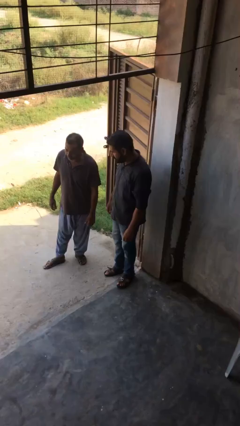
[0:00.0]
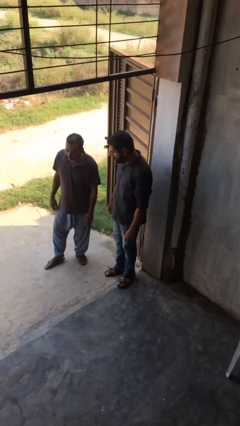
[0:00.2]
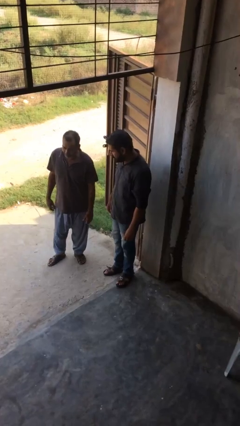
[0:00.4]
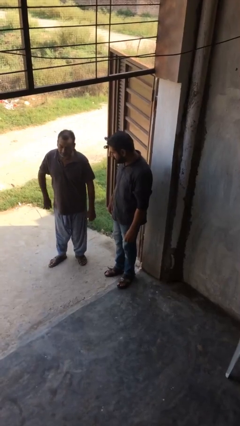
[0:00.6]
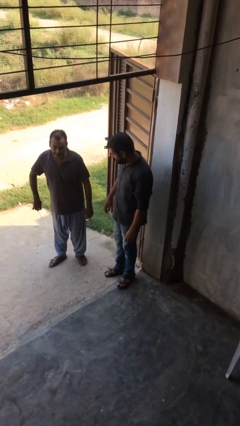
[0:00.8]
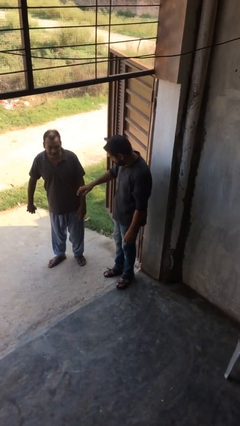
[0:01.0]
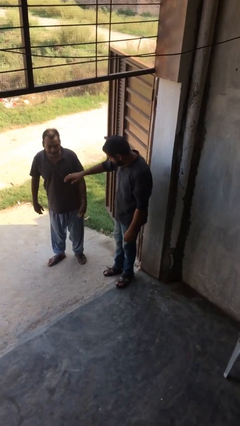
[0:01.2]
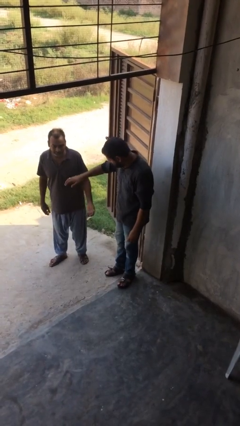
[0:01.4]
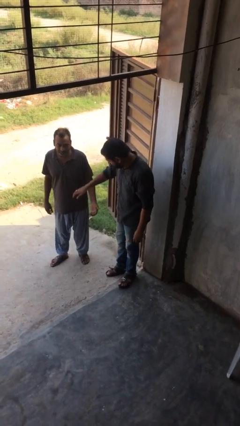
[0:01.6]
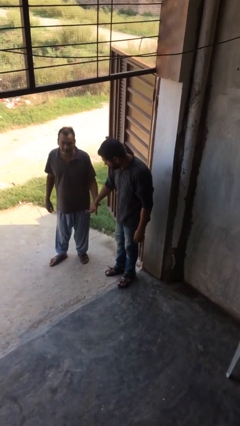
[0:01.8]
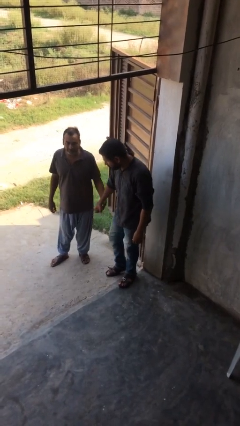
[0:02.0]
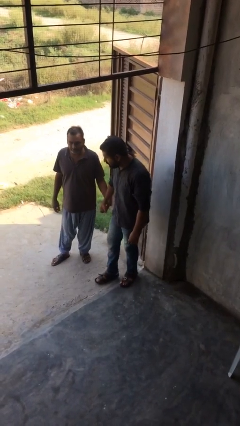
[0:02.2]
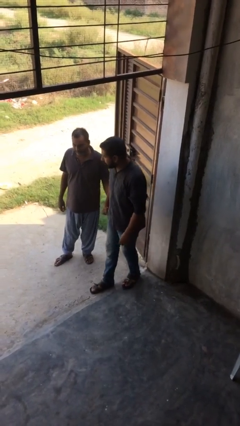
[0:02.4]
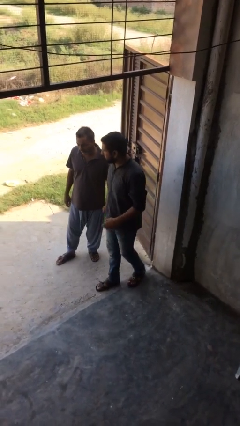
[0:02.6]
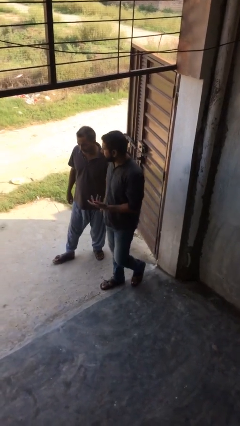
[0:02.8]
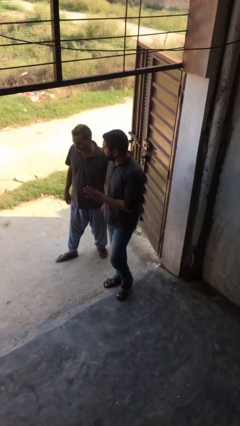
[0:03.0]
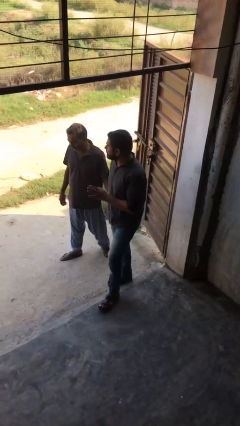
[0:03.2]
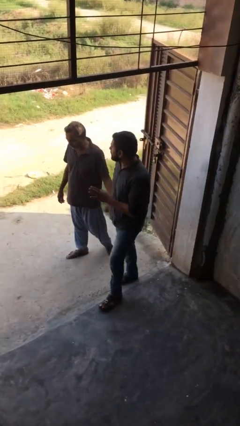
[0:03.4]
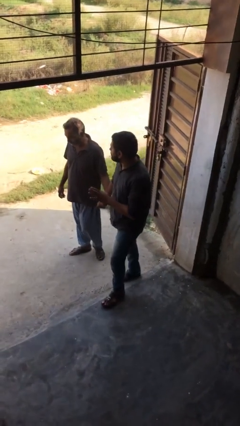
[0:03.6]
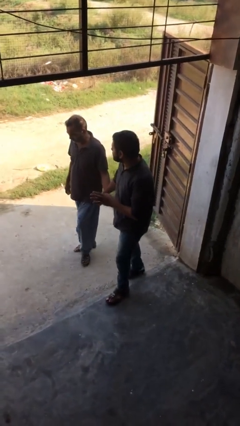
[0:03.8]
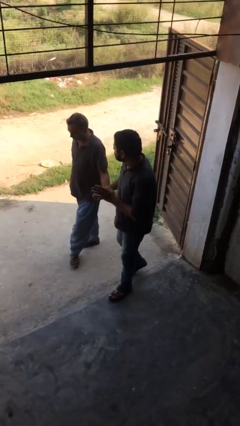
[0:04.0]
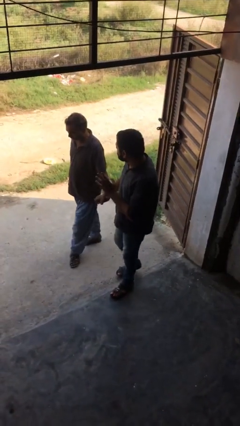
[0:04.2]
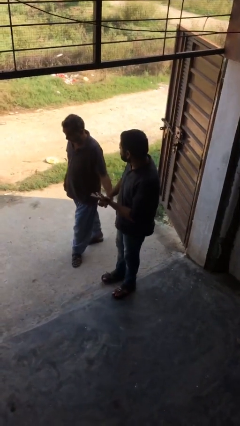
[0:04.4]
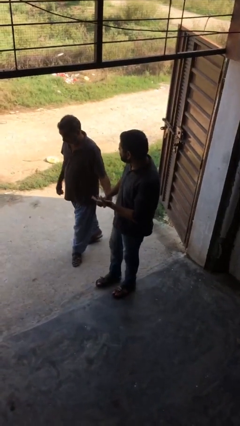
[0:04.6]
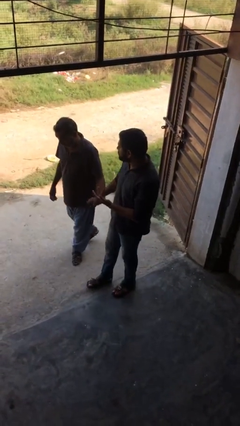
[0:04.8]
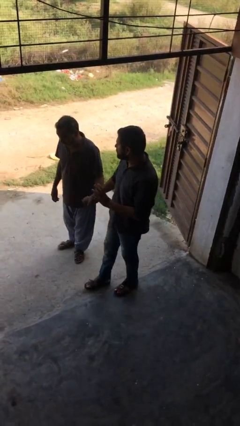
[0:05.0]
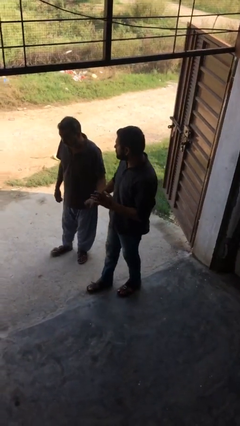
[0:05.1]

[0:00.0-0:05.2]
person holds hand

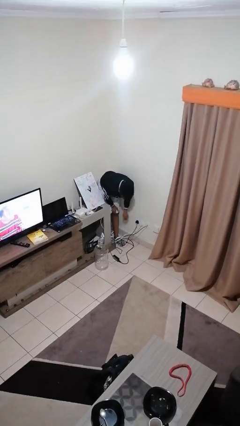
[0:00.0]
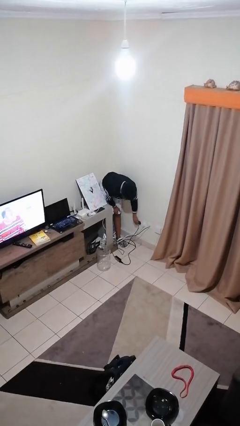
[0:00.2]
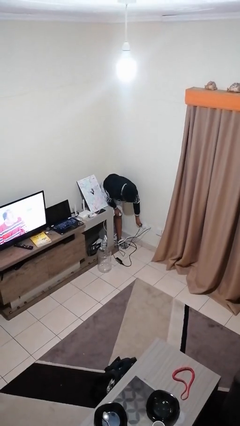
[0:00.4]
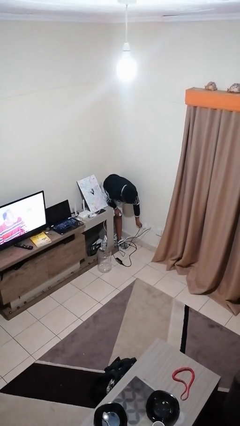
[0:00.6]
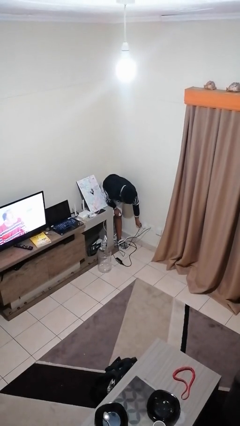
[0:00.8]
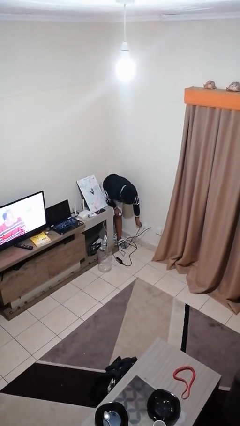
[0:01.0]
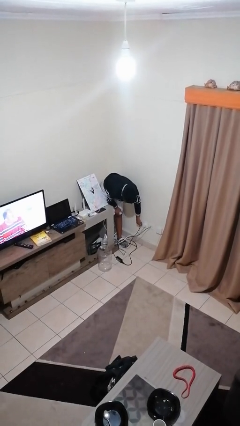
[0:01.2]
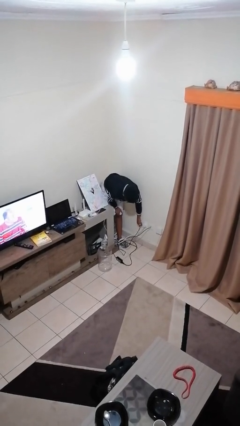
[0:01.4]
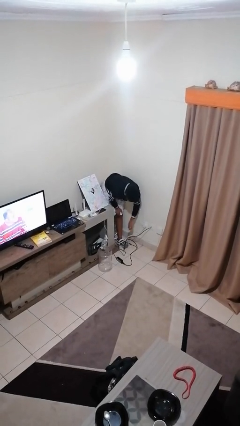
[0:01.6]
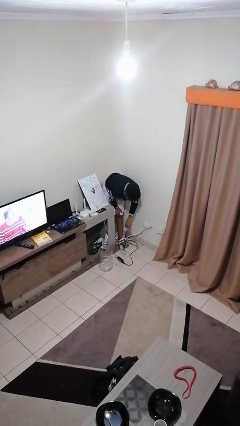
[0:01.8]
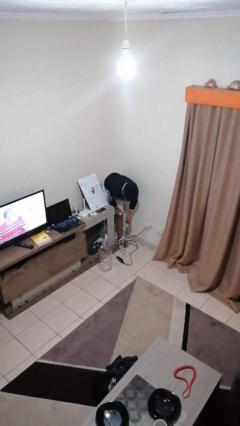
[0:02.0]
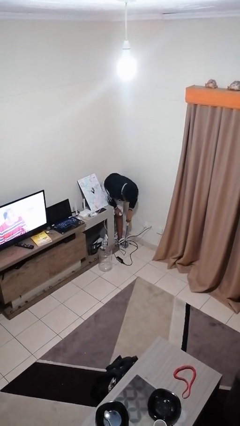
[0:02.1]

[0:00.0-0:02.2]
person unplugs from electrical socket

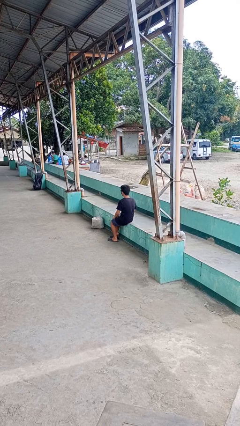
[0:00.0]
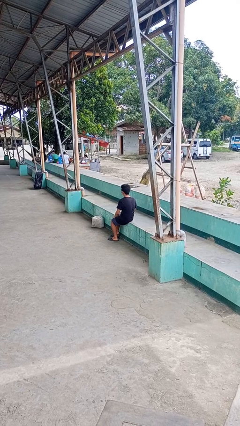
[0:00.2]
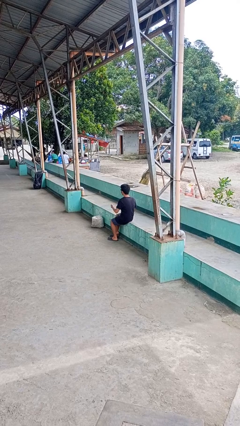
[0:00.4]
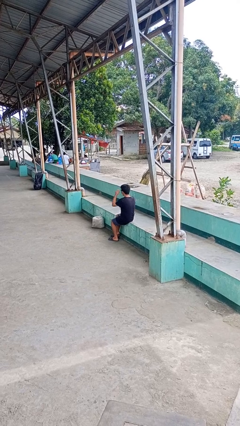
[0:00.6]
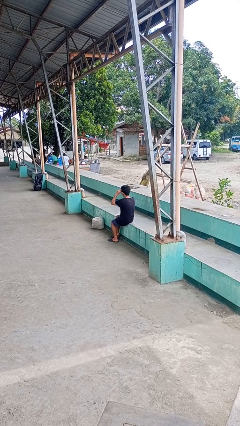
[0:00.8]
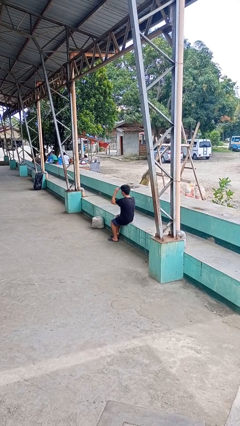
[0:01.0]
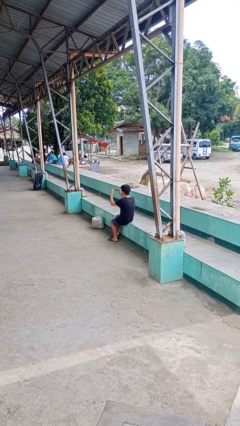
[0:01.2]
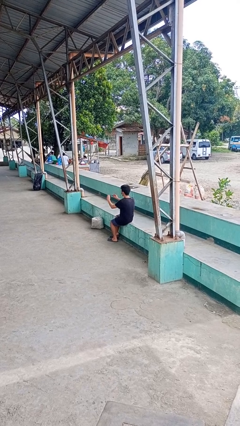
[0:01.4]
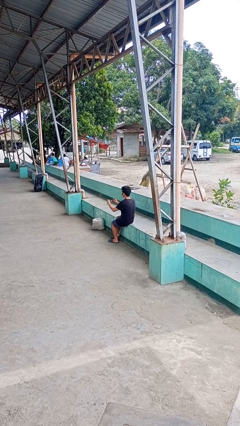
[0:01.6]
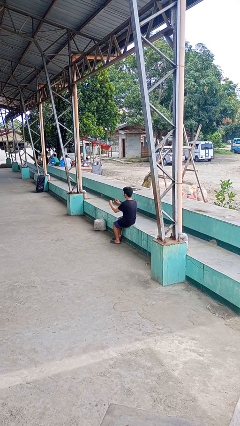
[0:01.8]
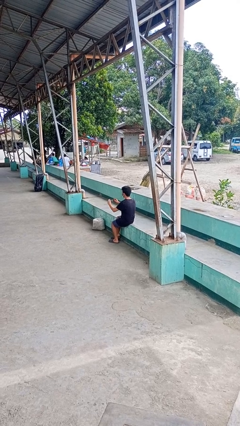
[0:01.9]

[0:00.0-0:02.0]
person takes off sunglasses

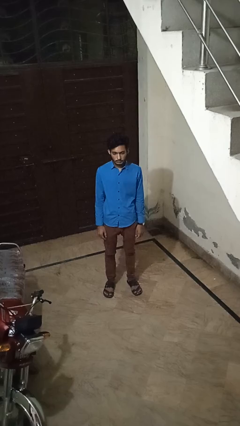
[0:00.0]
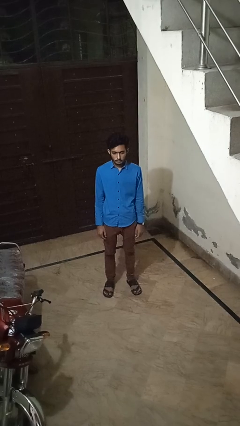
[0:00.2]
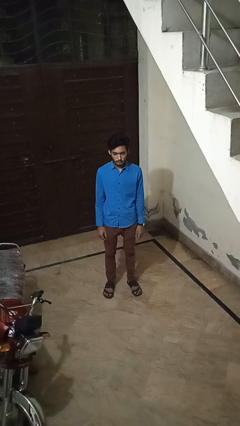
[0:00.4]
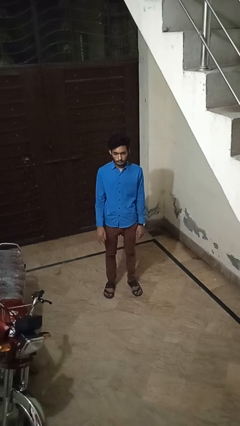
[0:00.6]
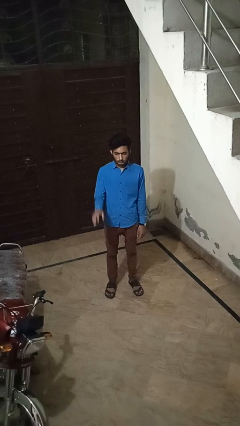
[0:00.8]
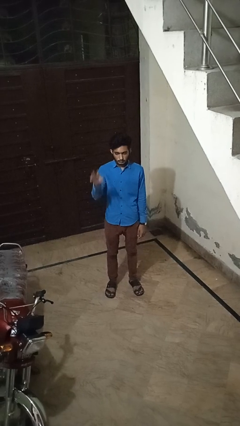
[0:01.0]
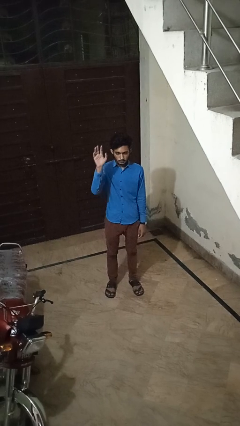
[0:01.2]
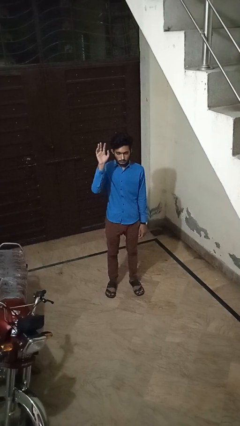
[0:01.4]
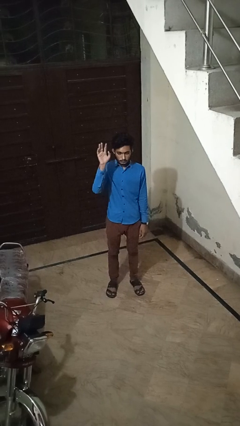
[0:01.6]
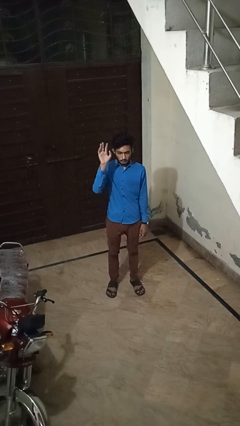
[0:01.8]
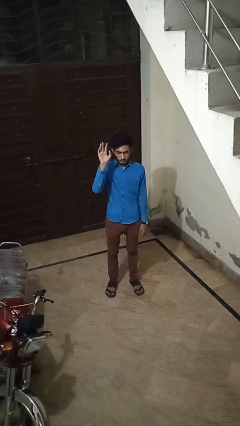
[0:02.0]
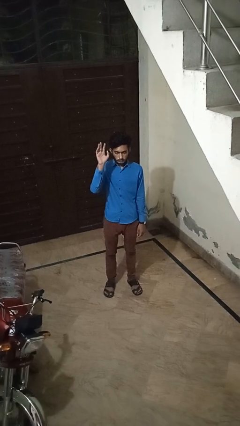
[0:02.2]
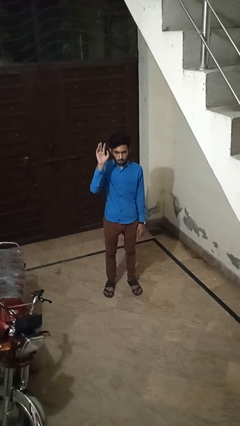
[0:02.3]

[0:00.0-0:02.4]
person gestures raise hand

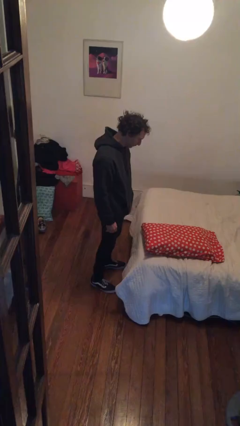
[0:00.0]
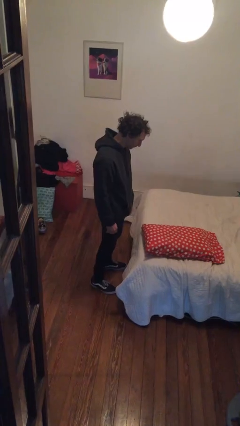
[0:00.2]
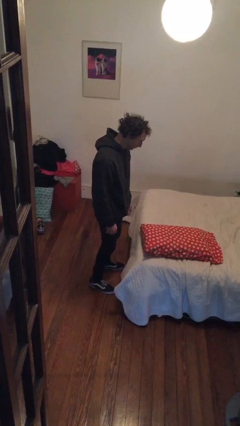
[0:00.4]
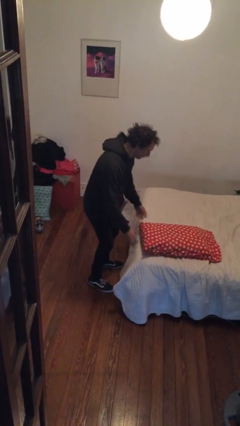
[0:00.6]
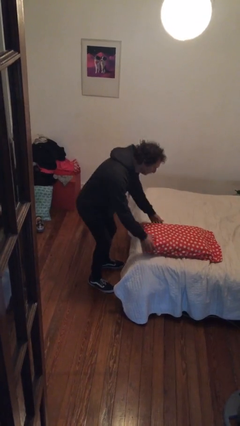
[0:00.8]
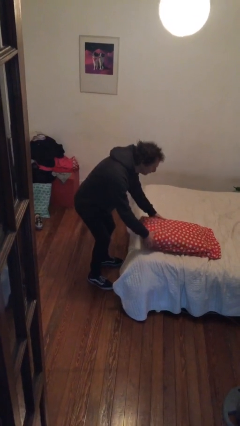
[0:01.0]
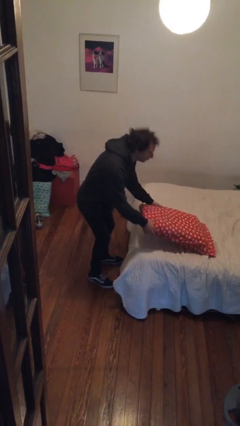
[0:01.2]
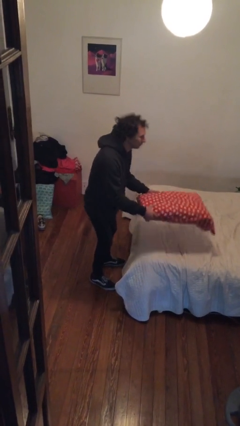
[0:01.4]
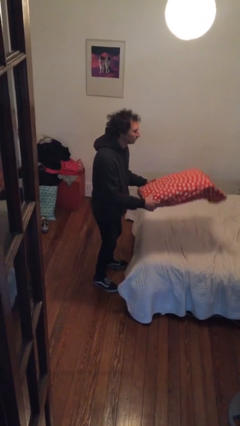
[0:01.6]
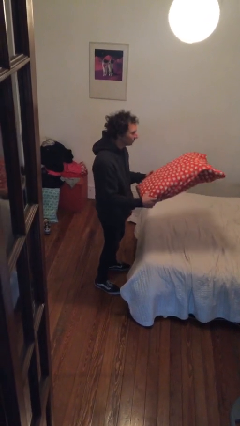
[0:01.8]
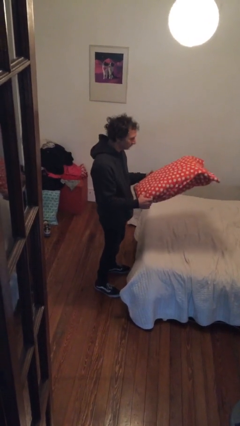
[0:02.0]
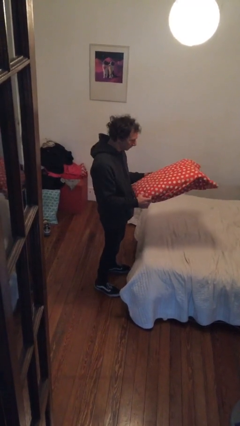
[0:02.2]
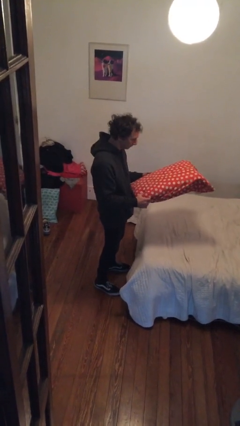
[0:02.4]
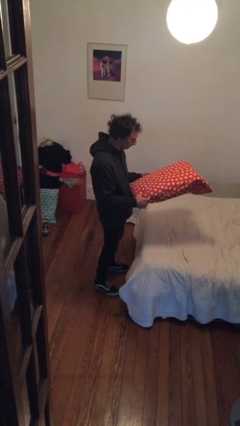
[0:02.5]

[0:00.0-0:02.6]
person picks up object from bed

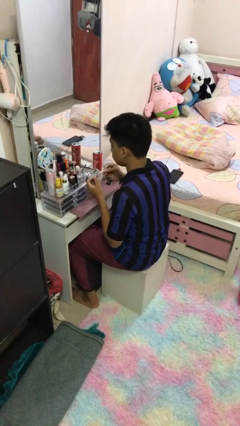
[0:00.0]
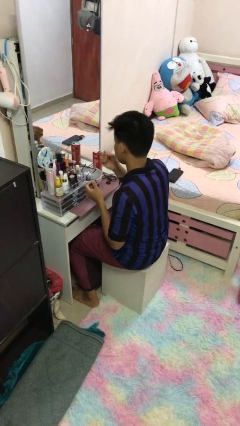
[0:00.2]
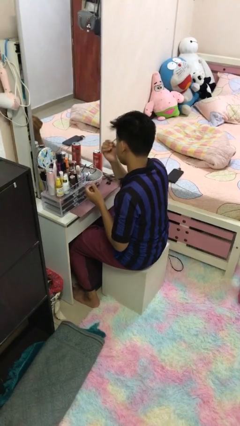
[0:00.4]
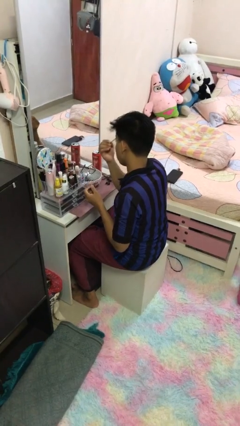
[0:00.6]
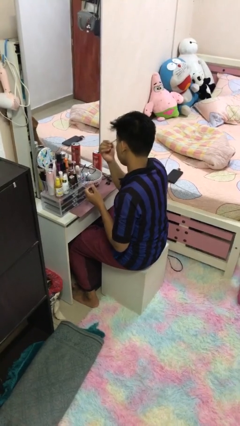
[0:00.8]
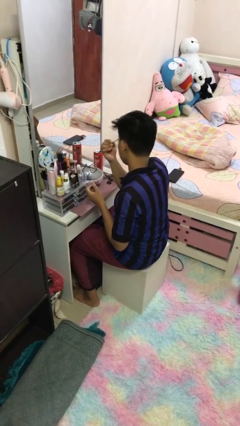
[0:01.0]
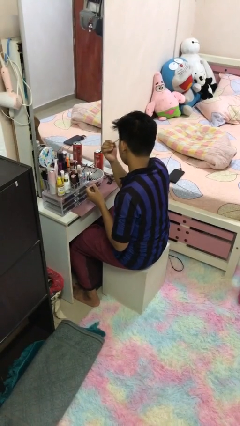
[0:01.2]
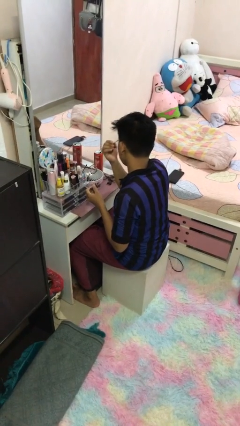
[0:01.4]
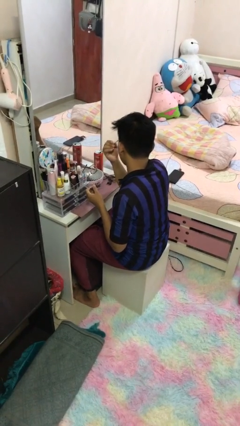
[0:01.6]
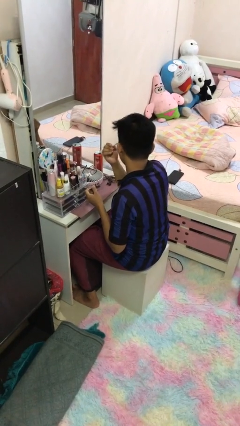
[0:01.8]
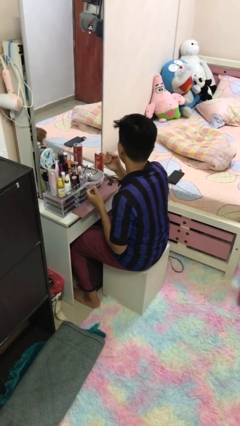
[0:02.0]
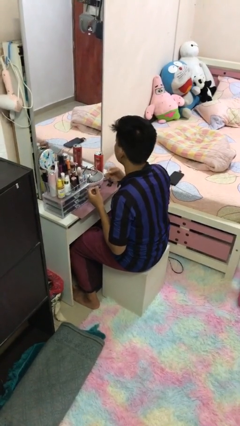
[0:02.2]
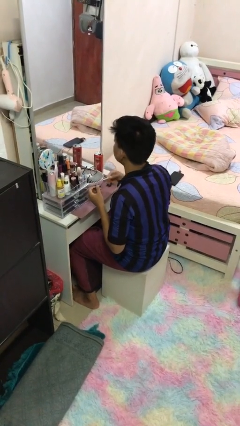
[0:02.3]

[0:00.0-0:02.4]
person applies eye makeup

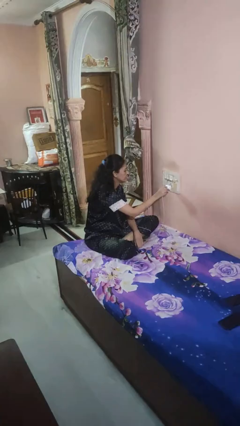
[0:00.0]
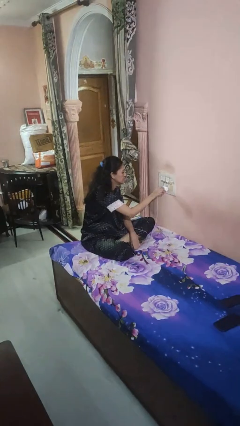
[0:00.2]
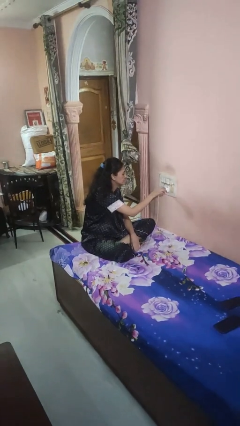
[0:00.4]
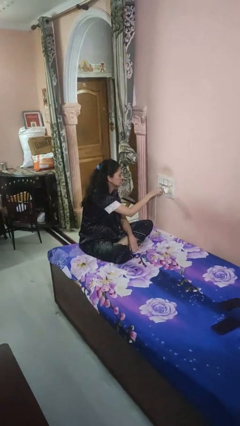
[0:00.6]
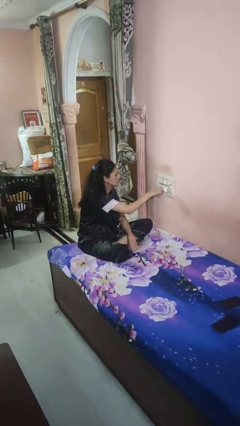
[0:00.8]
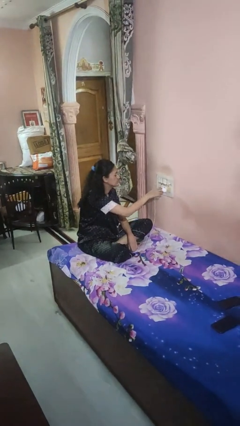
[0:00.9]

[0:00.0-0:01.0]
person plugs into electrical socket
